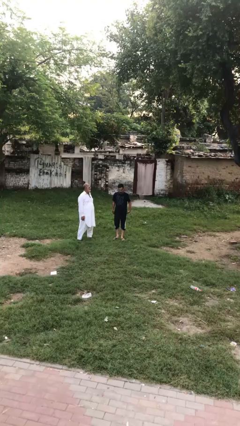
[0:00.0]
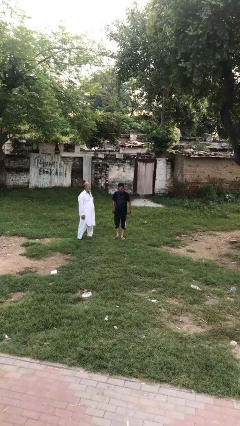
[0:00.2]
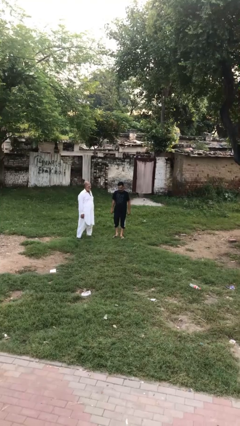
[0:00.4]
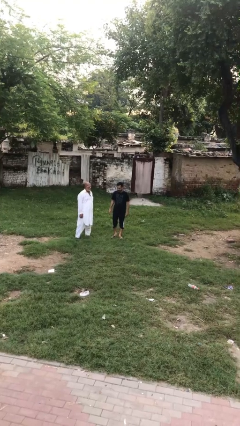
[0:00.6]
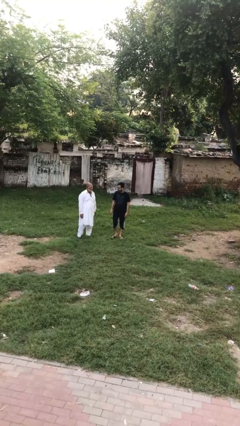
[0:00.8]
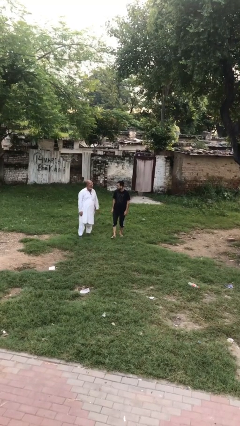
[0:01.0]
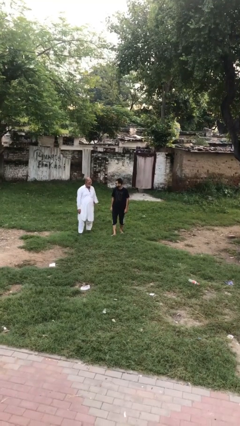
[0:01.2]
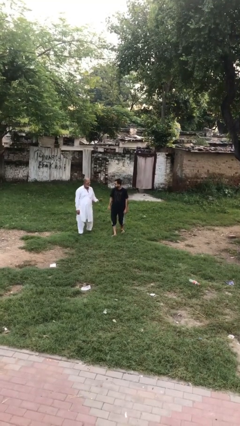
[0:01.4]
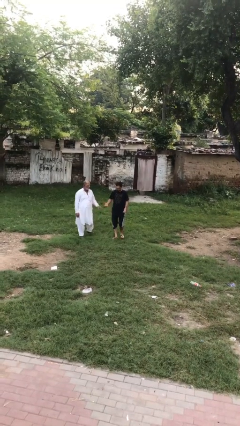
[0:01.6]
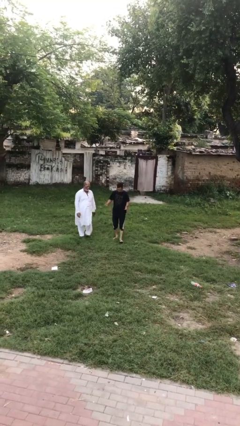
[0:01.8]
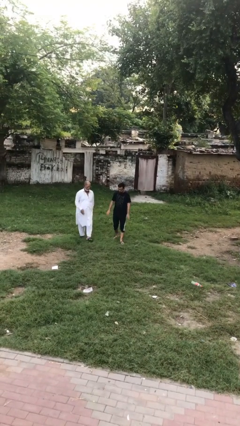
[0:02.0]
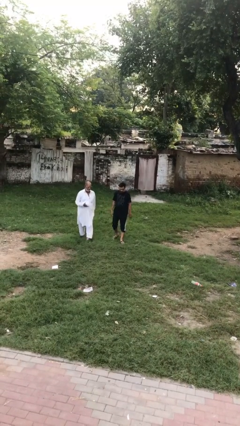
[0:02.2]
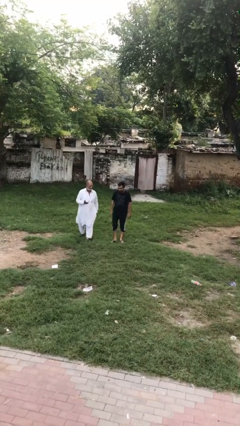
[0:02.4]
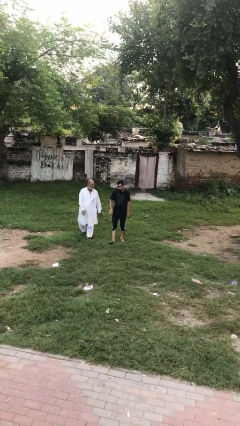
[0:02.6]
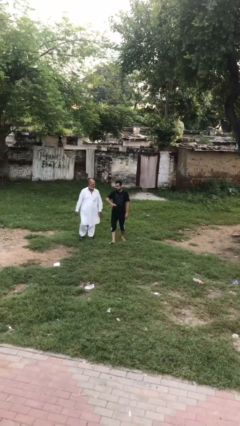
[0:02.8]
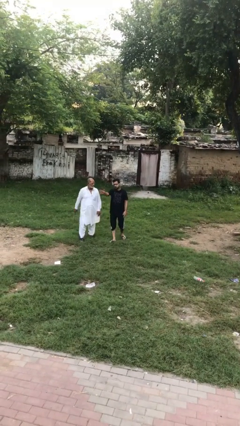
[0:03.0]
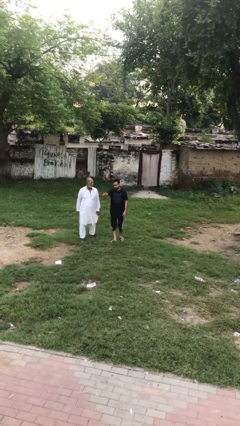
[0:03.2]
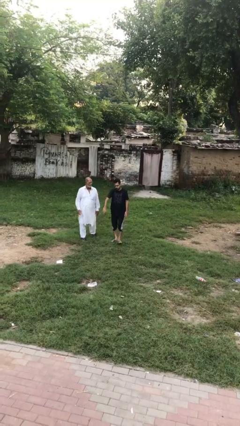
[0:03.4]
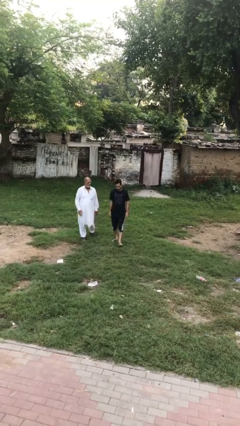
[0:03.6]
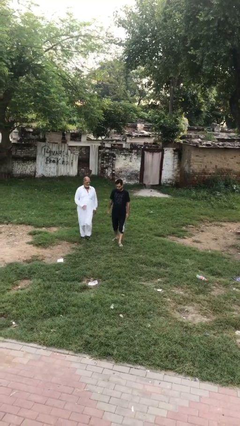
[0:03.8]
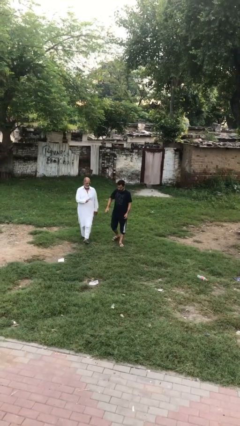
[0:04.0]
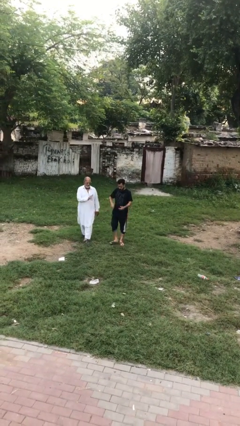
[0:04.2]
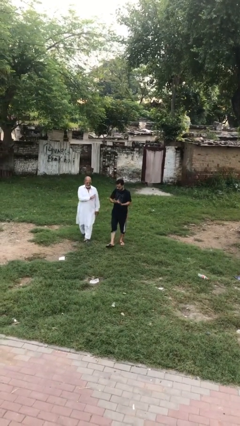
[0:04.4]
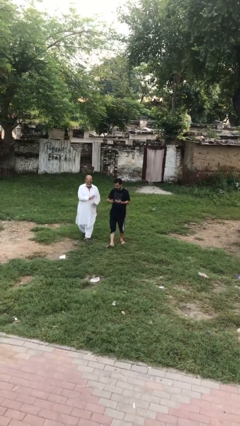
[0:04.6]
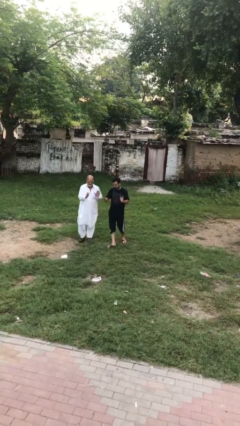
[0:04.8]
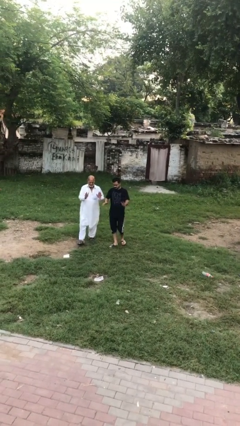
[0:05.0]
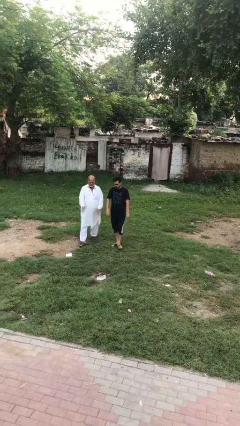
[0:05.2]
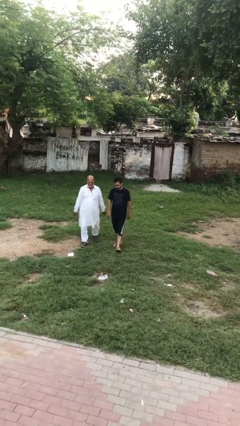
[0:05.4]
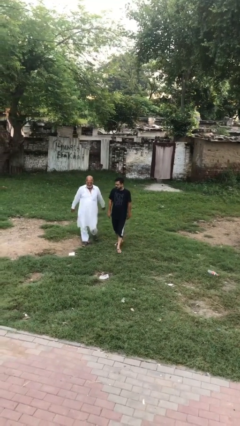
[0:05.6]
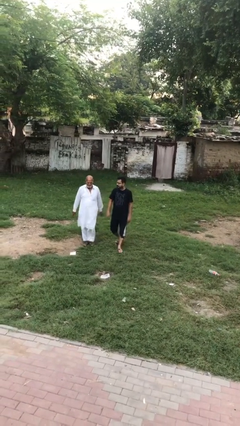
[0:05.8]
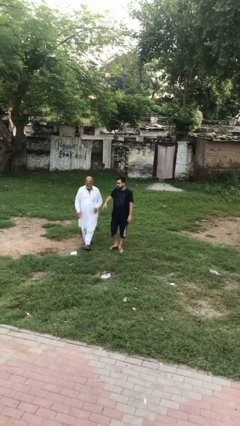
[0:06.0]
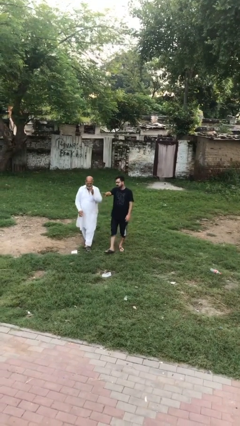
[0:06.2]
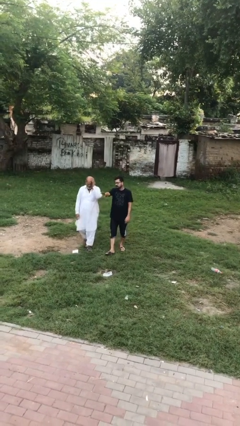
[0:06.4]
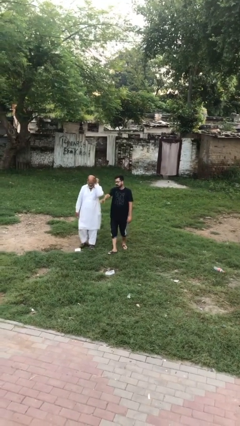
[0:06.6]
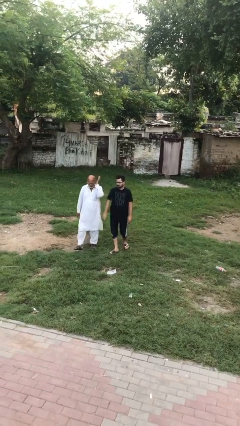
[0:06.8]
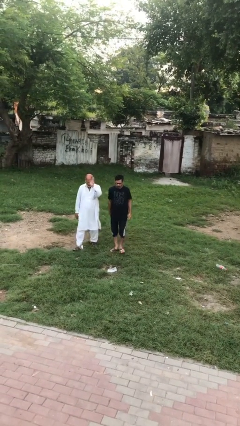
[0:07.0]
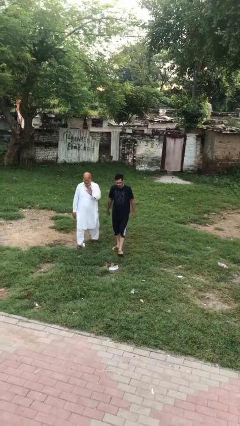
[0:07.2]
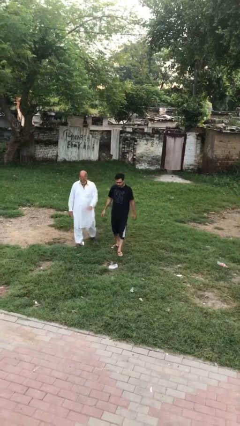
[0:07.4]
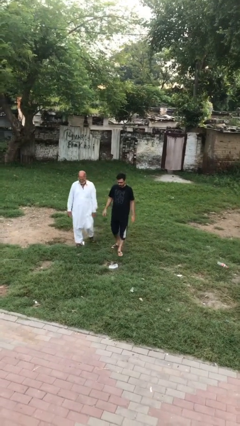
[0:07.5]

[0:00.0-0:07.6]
person talks to person

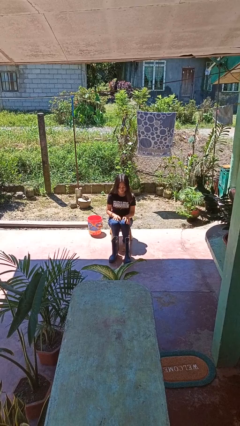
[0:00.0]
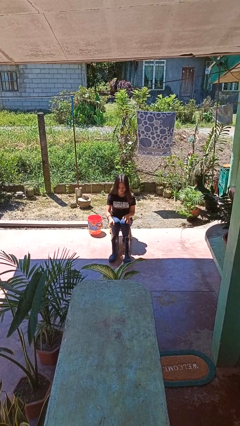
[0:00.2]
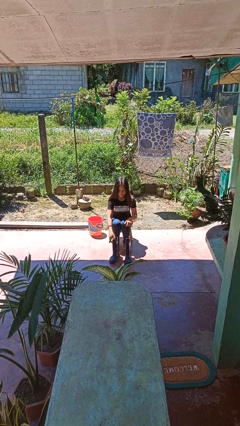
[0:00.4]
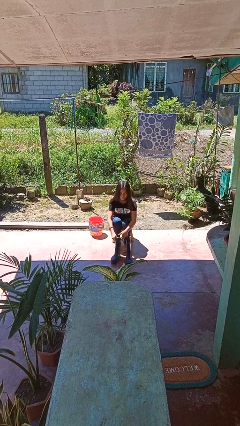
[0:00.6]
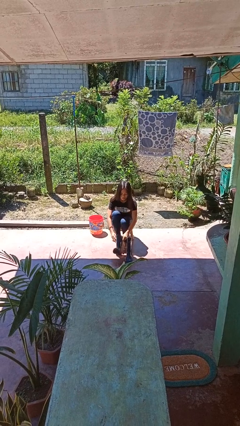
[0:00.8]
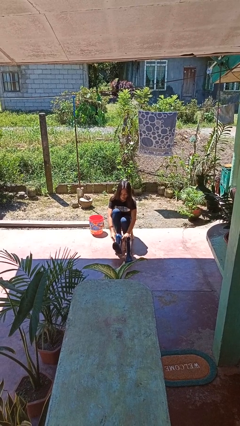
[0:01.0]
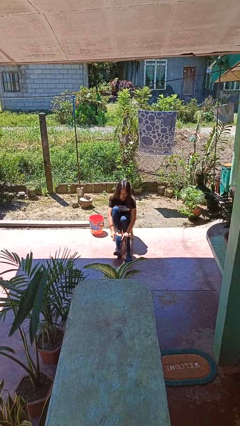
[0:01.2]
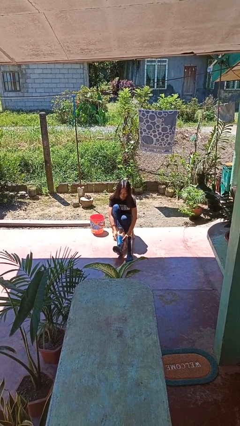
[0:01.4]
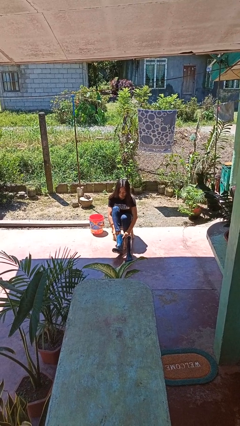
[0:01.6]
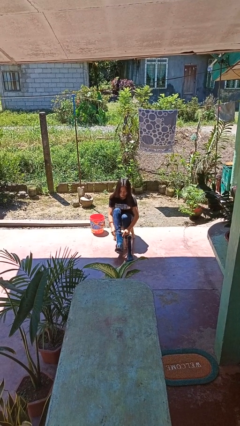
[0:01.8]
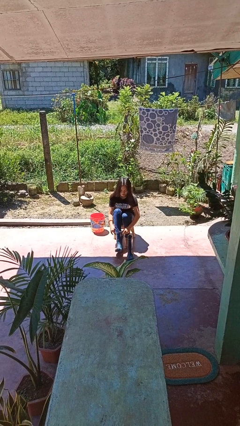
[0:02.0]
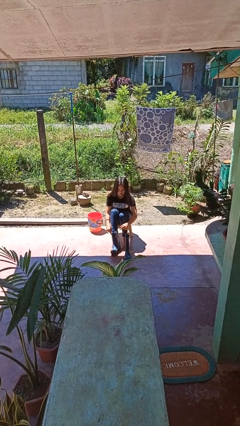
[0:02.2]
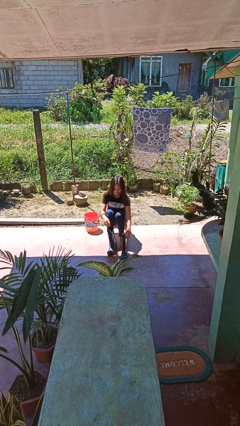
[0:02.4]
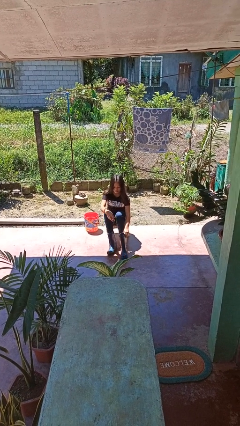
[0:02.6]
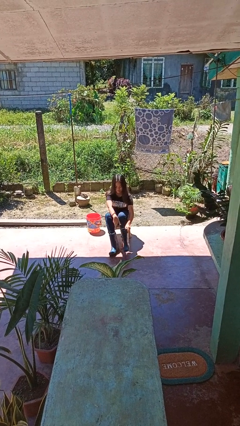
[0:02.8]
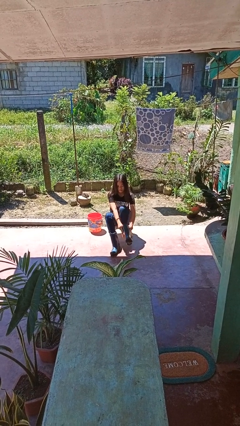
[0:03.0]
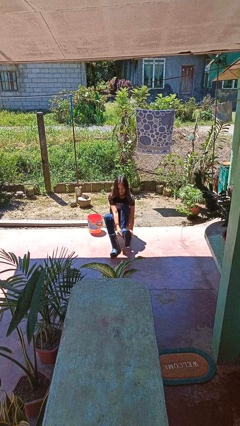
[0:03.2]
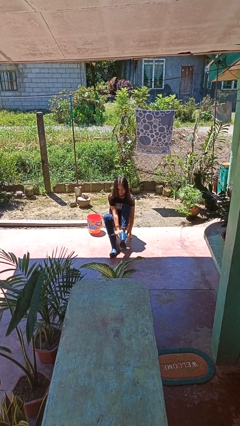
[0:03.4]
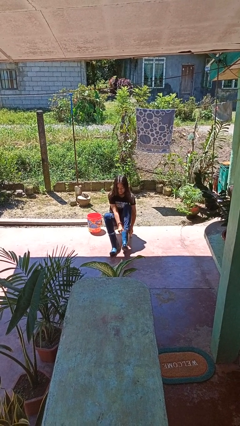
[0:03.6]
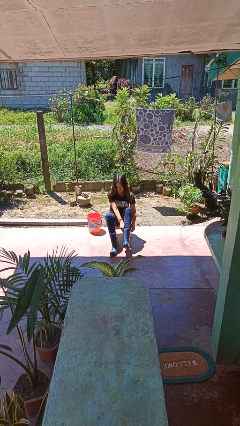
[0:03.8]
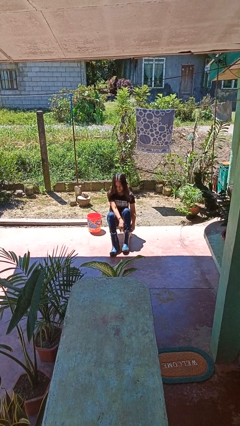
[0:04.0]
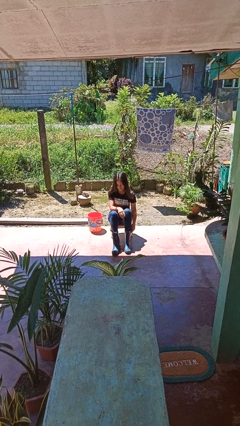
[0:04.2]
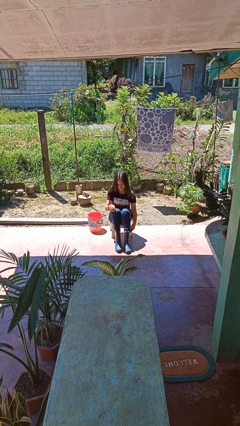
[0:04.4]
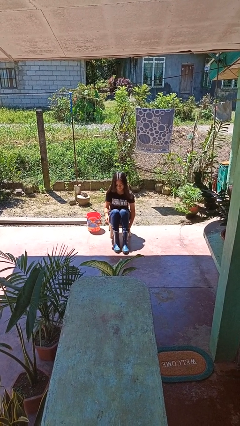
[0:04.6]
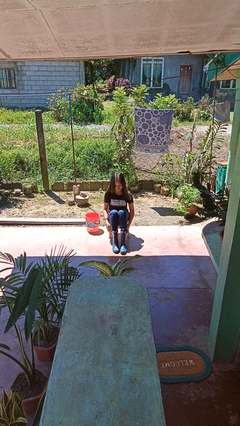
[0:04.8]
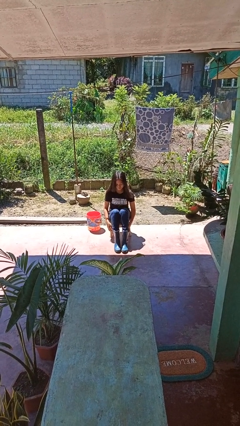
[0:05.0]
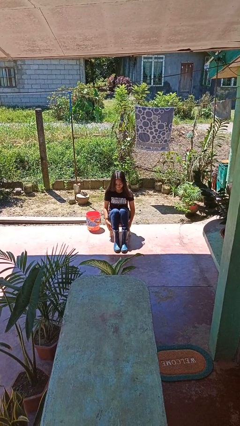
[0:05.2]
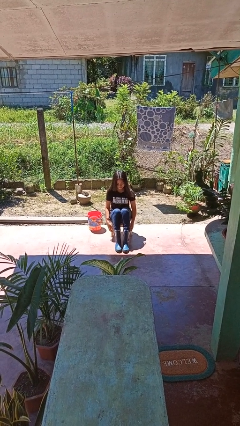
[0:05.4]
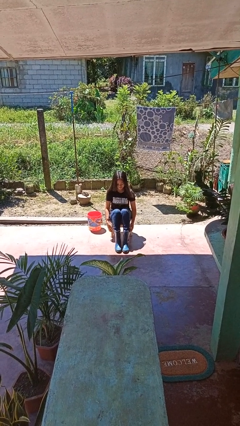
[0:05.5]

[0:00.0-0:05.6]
person puts on boots

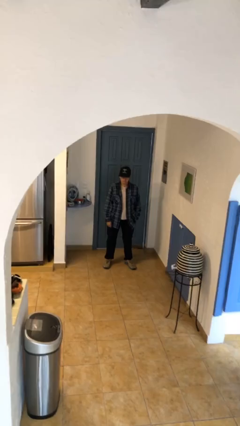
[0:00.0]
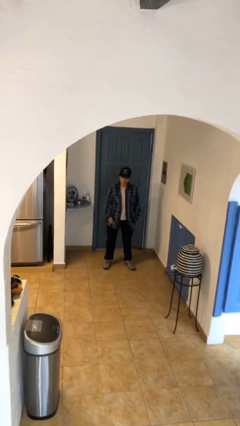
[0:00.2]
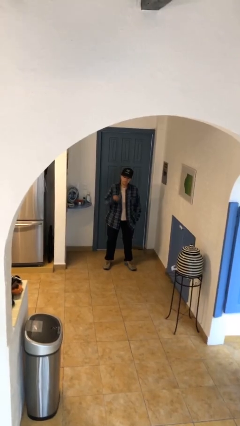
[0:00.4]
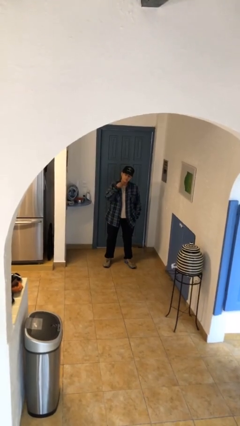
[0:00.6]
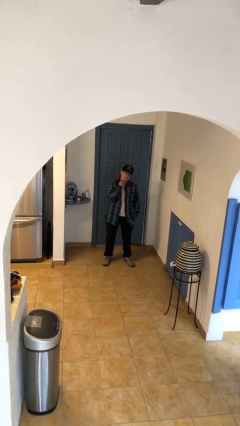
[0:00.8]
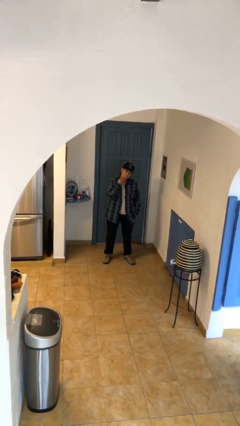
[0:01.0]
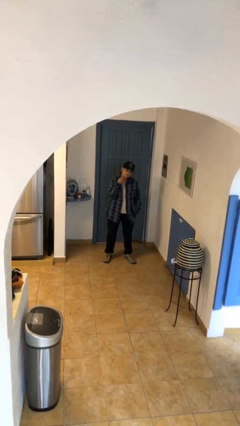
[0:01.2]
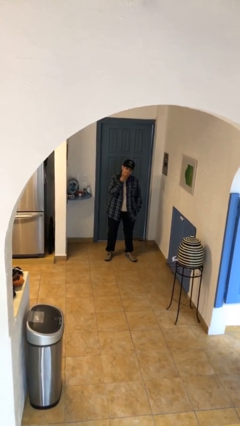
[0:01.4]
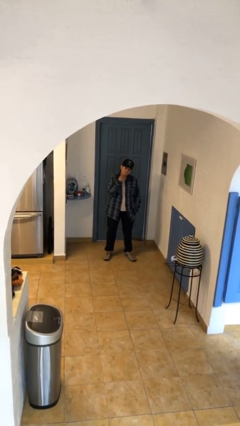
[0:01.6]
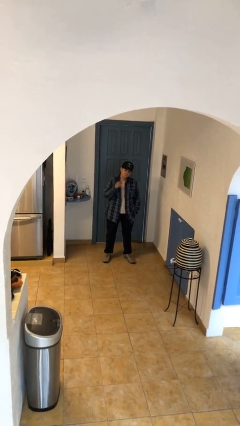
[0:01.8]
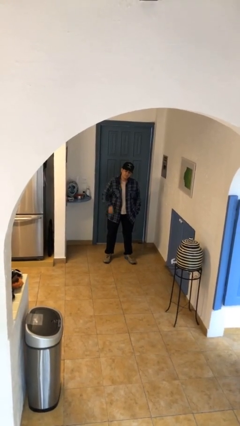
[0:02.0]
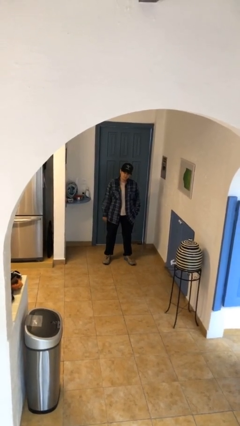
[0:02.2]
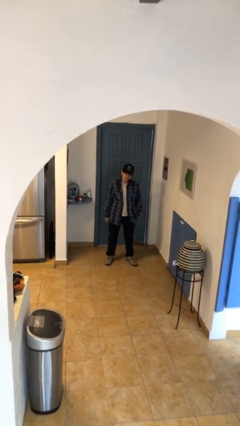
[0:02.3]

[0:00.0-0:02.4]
person strokes chin

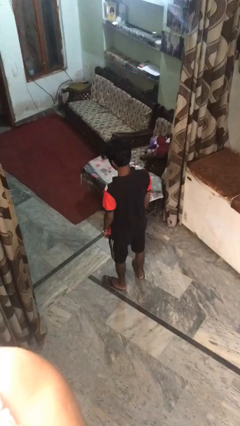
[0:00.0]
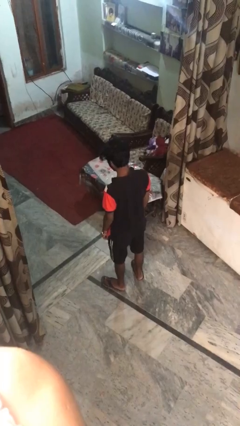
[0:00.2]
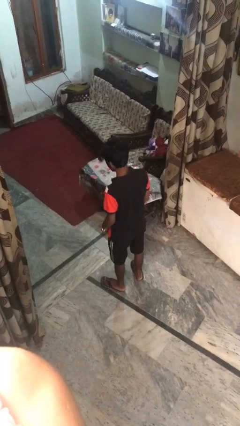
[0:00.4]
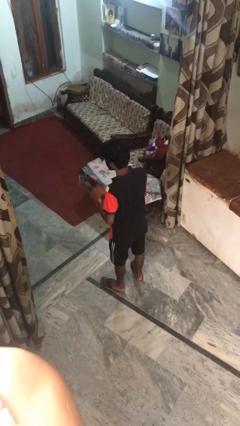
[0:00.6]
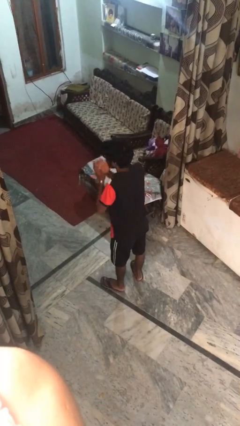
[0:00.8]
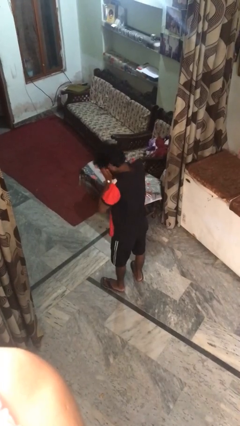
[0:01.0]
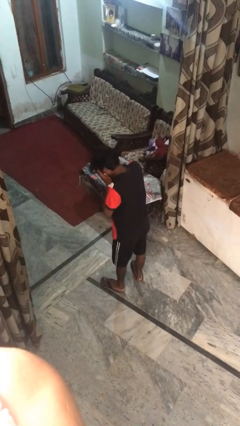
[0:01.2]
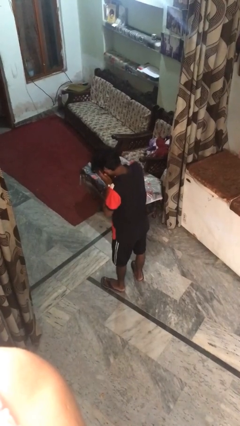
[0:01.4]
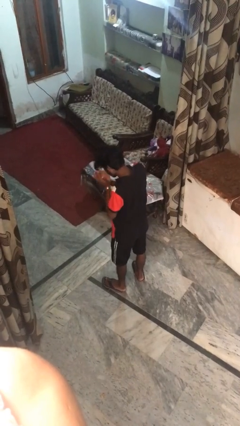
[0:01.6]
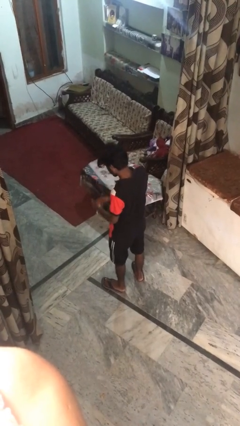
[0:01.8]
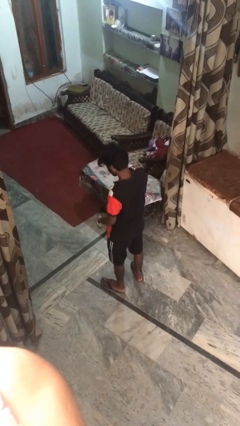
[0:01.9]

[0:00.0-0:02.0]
person sneezes into hand
